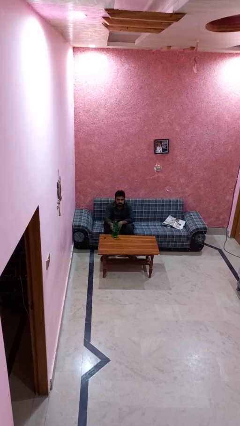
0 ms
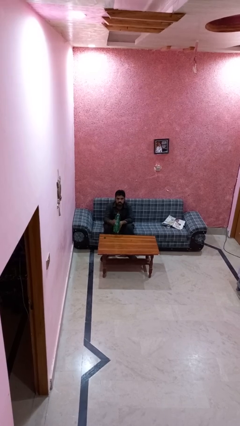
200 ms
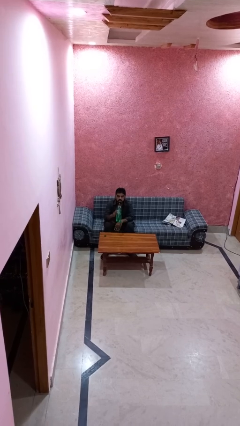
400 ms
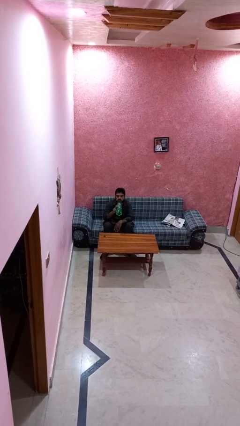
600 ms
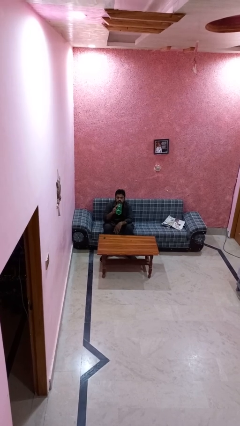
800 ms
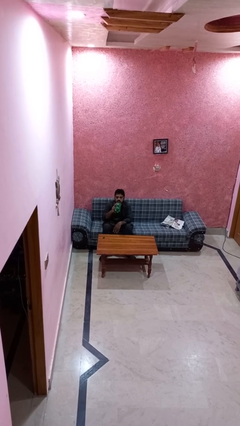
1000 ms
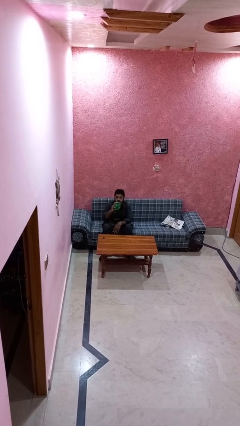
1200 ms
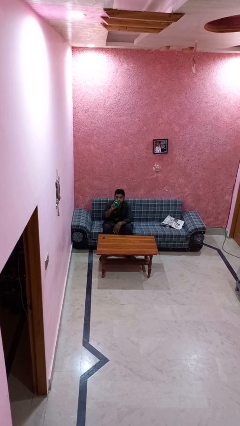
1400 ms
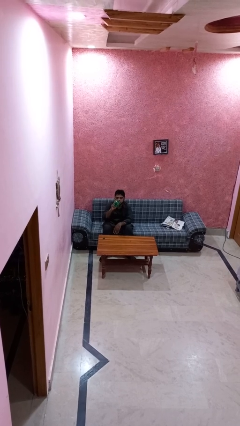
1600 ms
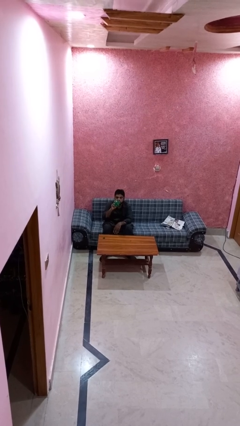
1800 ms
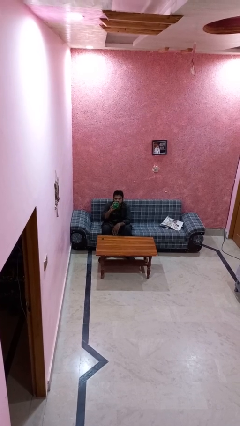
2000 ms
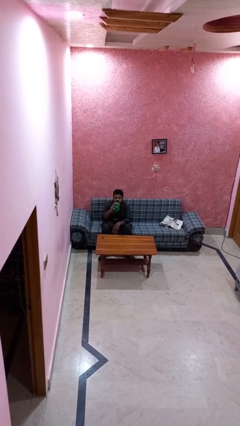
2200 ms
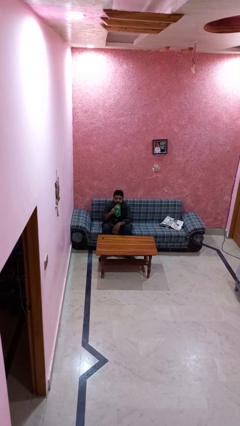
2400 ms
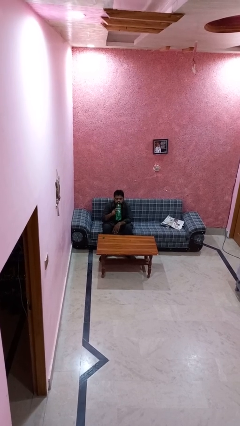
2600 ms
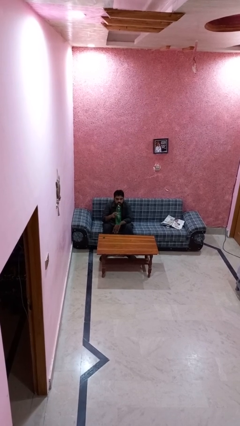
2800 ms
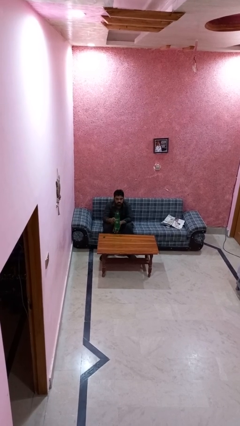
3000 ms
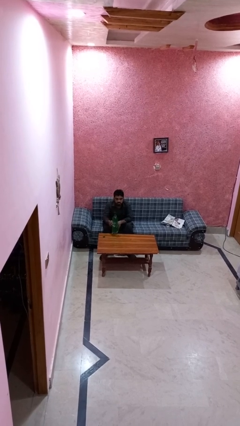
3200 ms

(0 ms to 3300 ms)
person drinks from bottle

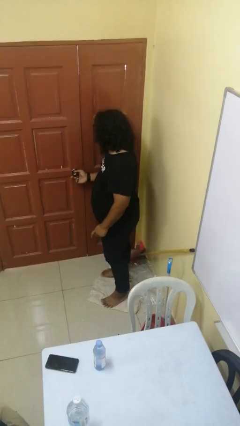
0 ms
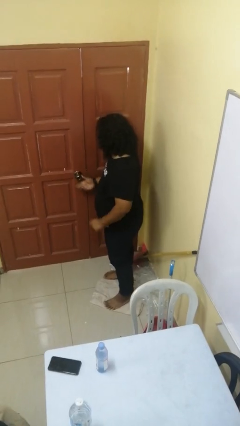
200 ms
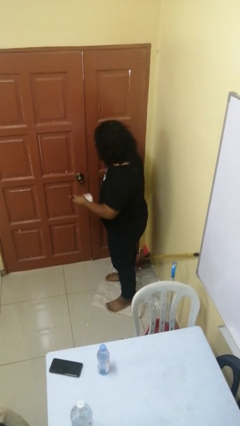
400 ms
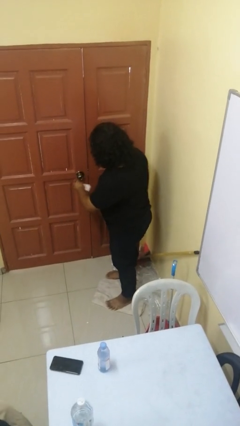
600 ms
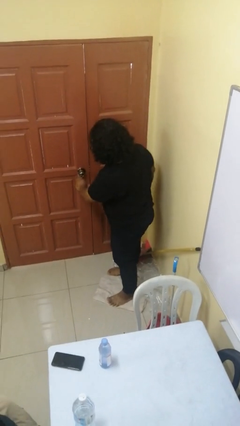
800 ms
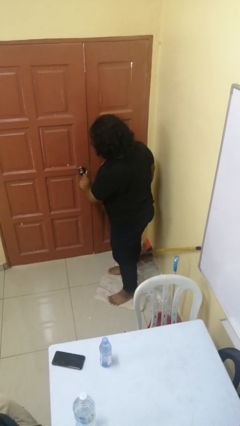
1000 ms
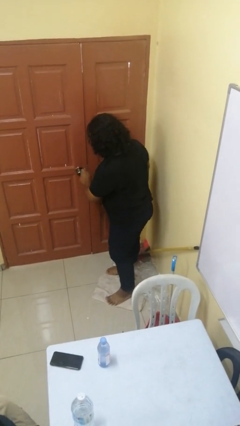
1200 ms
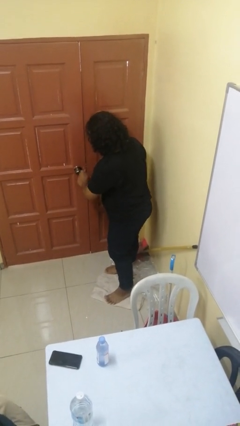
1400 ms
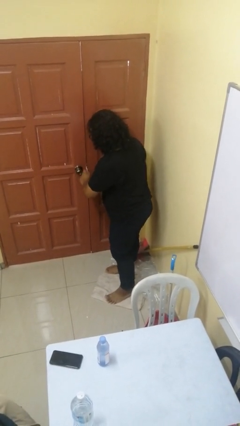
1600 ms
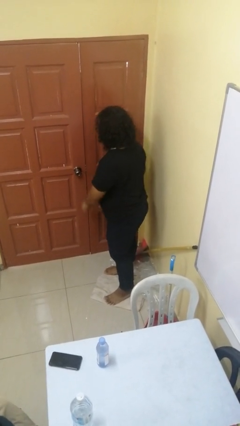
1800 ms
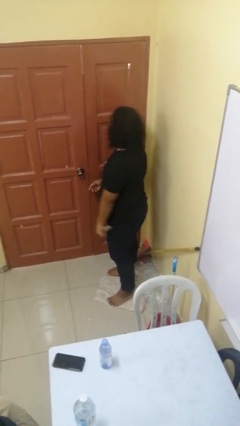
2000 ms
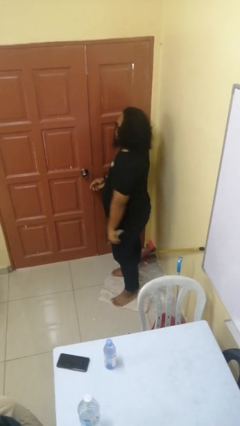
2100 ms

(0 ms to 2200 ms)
person locks door with keys

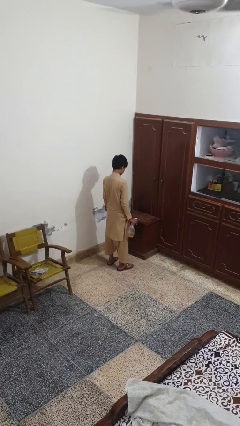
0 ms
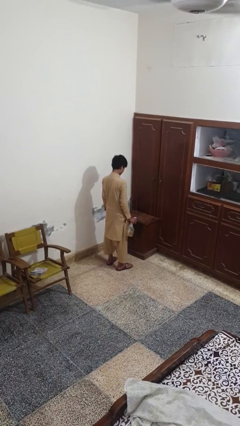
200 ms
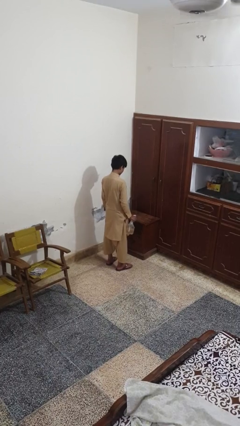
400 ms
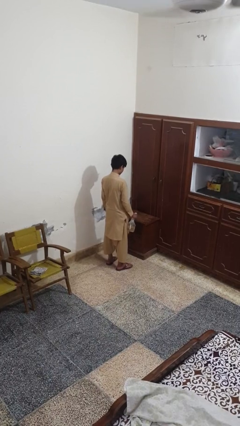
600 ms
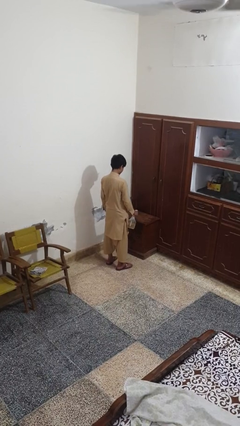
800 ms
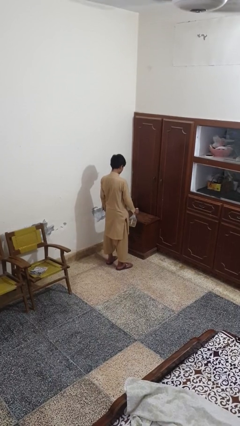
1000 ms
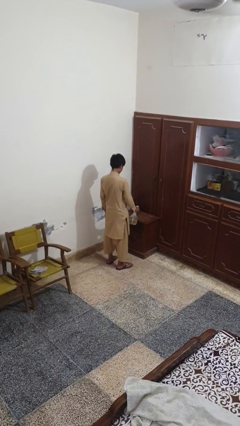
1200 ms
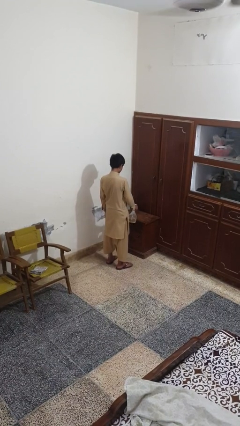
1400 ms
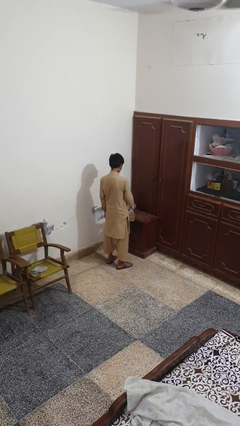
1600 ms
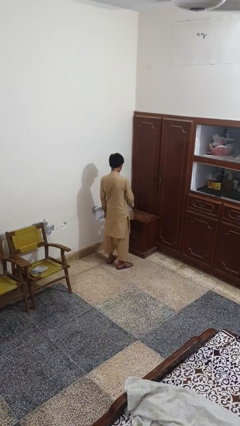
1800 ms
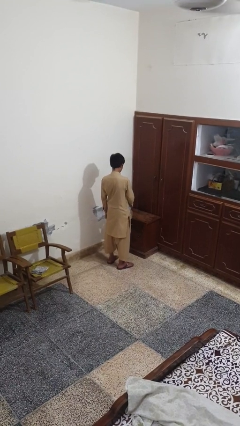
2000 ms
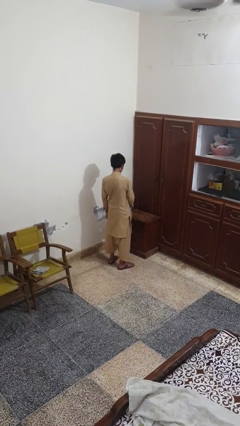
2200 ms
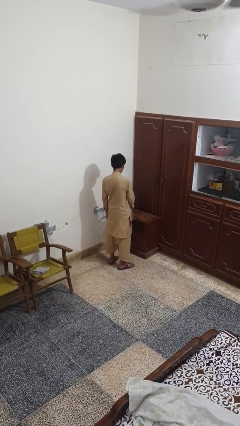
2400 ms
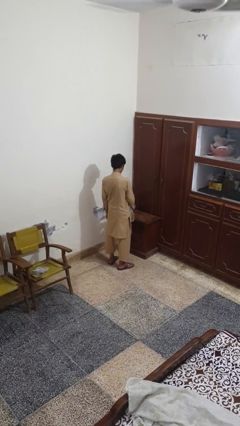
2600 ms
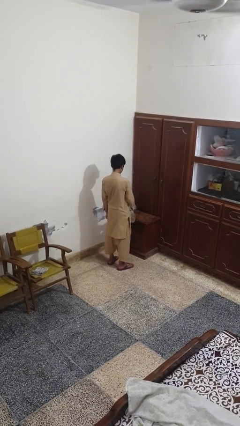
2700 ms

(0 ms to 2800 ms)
person sprays from bottle

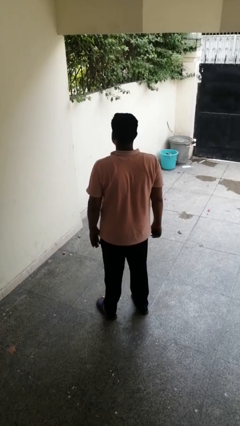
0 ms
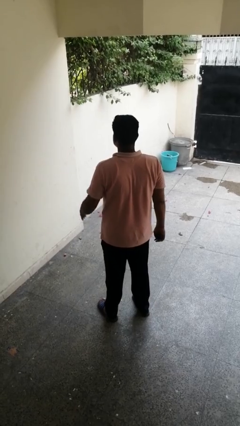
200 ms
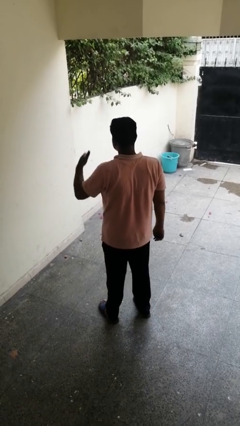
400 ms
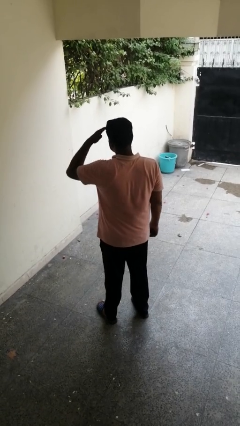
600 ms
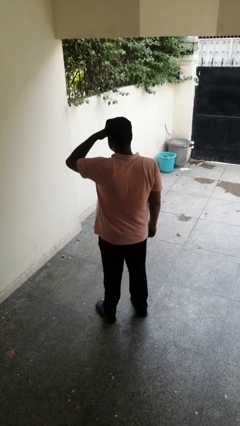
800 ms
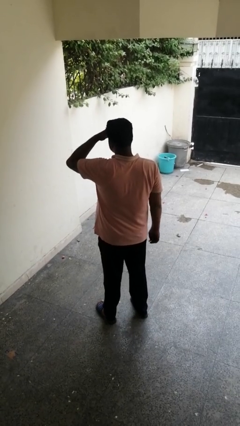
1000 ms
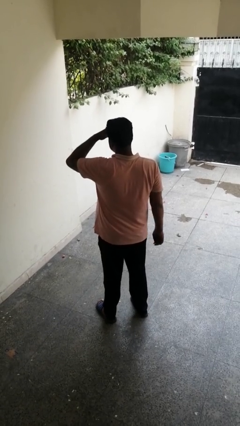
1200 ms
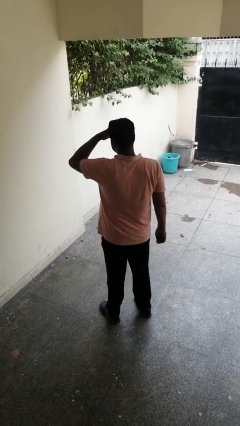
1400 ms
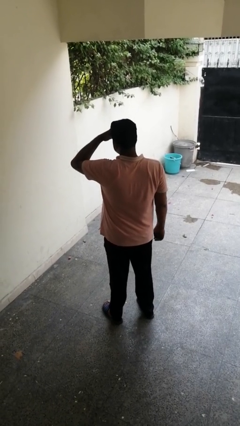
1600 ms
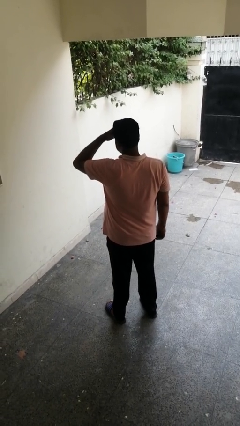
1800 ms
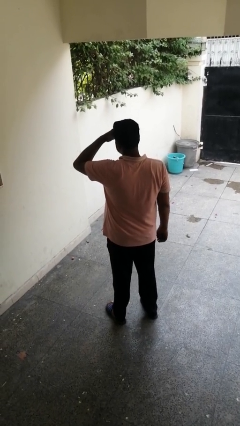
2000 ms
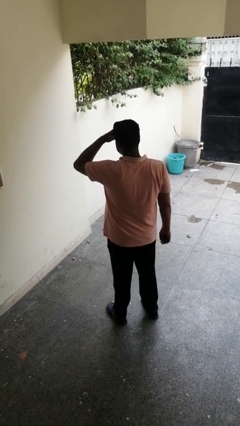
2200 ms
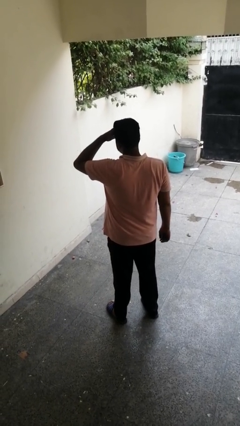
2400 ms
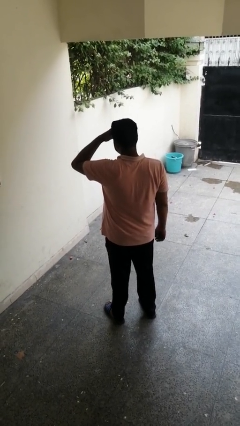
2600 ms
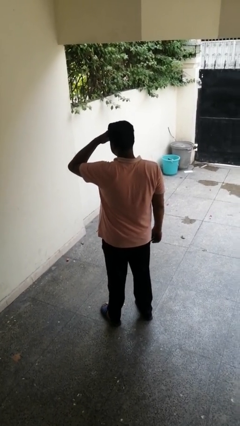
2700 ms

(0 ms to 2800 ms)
person shades eyes

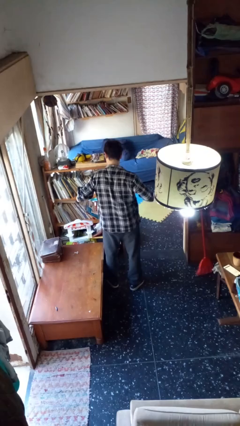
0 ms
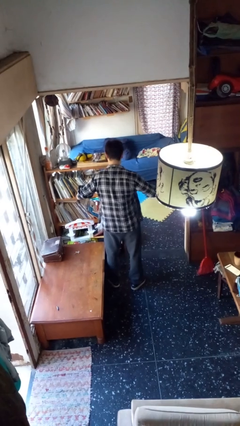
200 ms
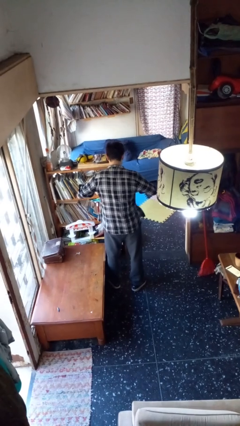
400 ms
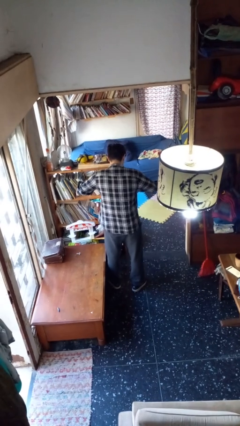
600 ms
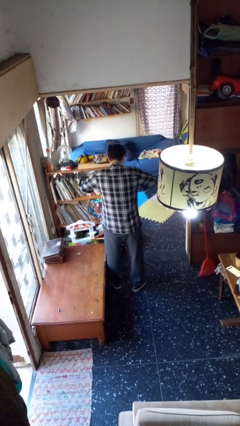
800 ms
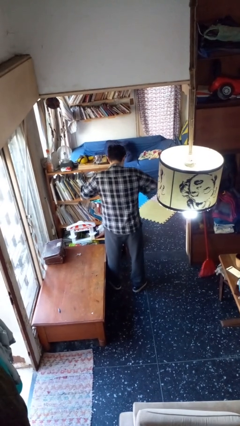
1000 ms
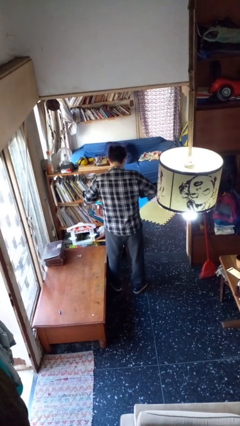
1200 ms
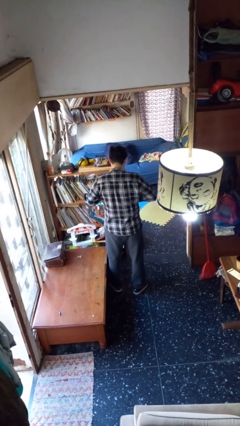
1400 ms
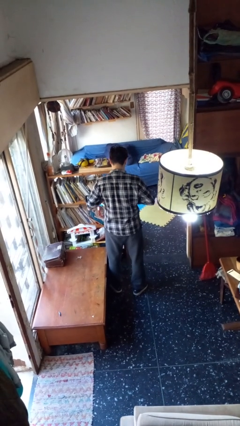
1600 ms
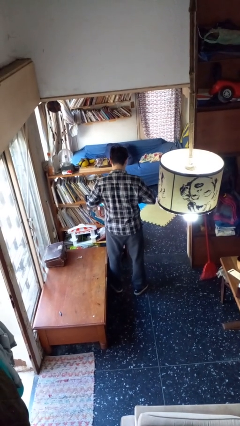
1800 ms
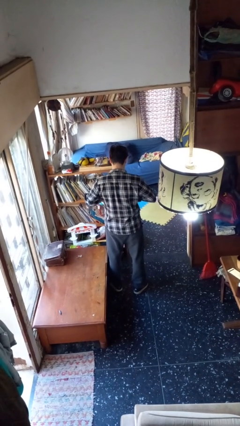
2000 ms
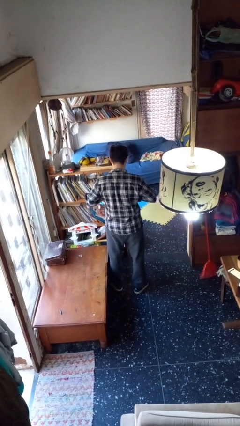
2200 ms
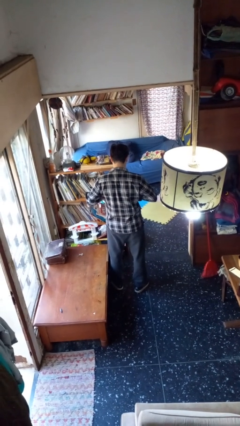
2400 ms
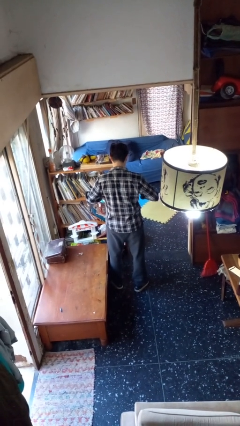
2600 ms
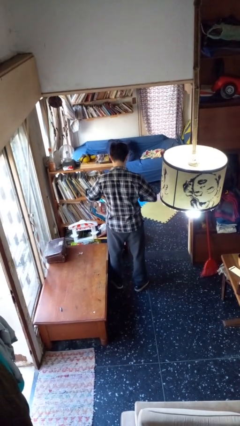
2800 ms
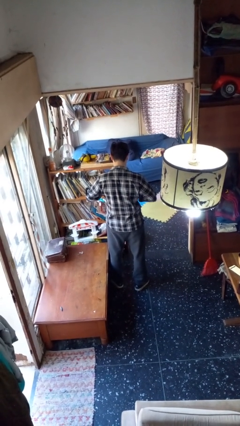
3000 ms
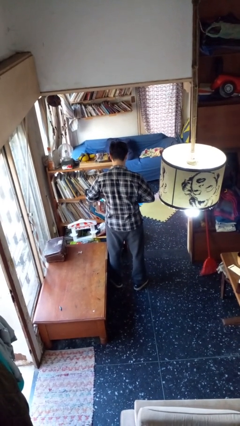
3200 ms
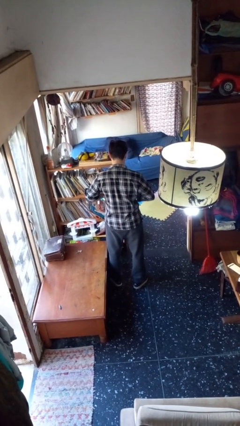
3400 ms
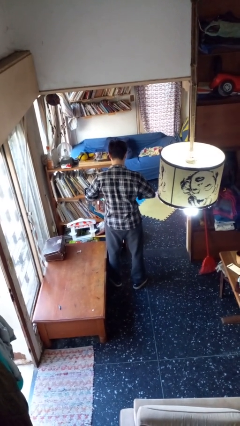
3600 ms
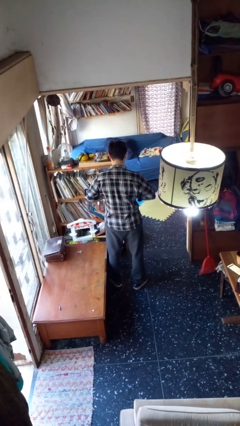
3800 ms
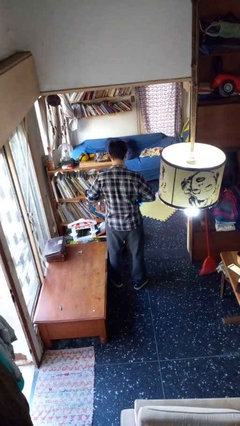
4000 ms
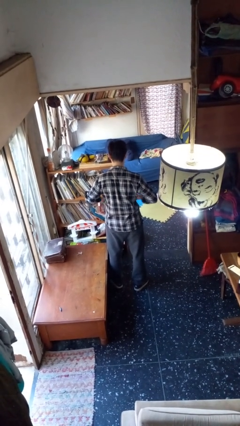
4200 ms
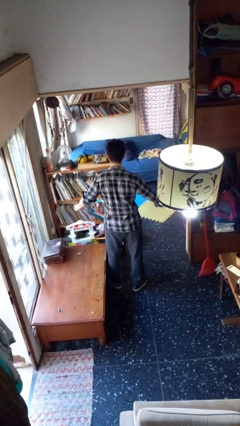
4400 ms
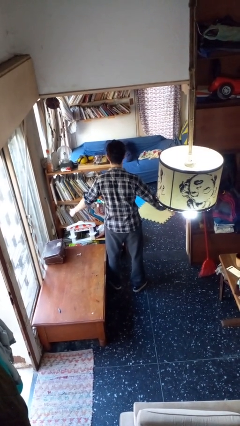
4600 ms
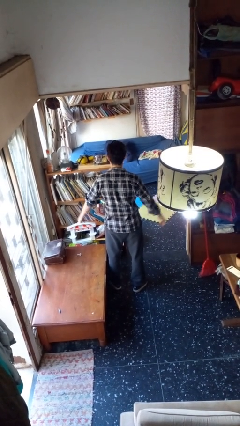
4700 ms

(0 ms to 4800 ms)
person buttons shirt

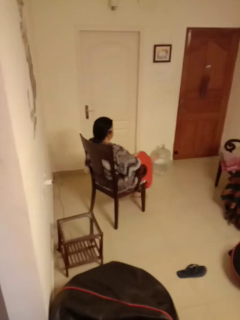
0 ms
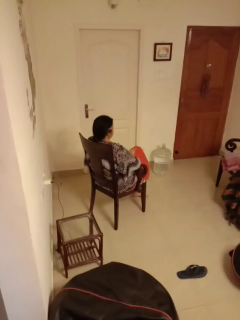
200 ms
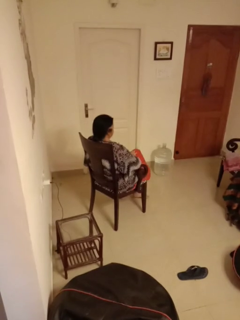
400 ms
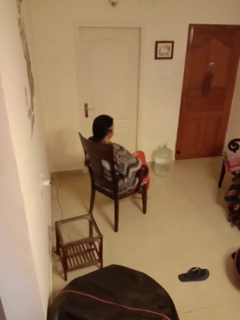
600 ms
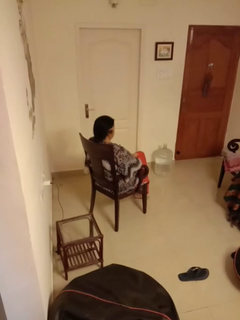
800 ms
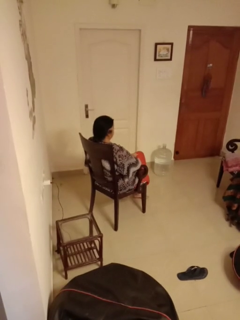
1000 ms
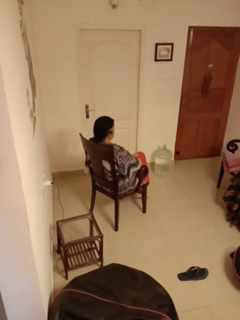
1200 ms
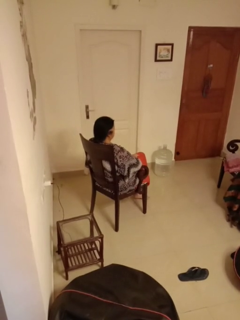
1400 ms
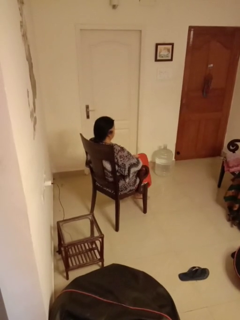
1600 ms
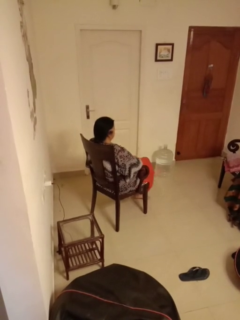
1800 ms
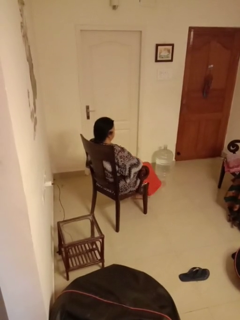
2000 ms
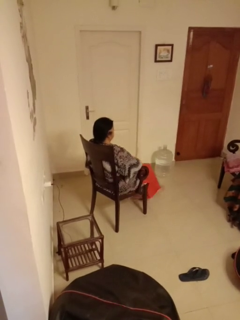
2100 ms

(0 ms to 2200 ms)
person crosses legs
